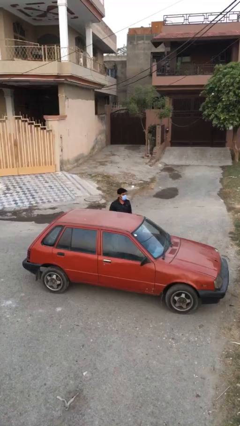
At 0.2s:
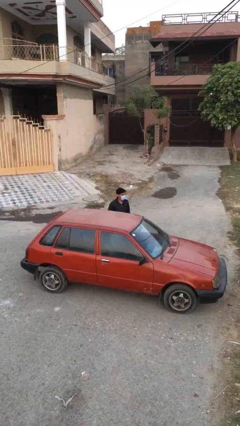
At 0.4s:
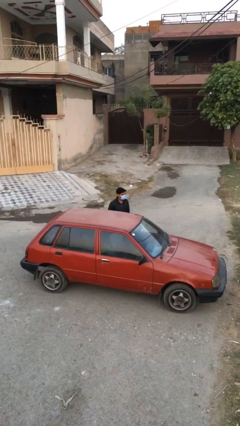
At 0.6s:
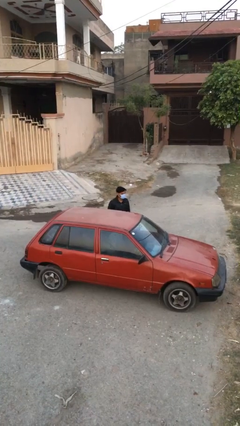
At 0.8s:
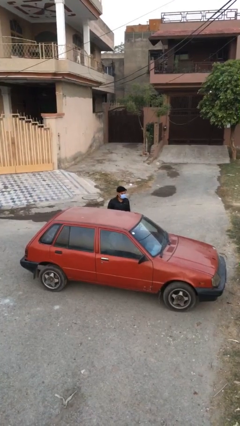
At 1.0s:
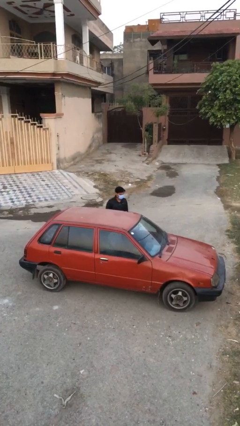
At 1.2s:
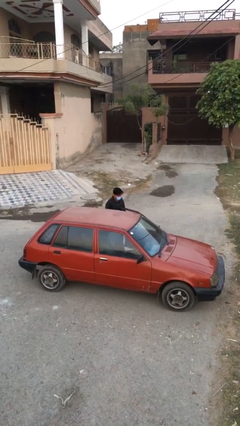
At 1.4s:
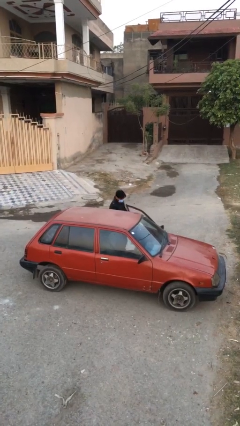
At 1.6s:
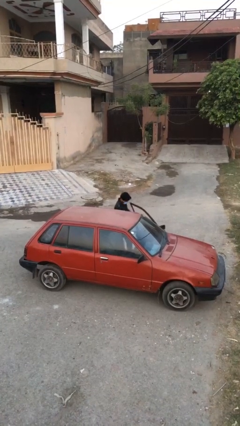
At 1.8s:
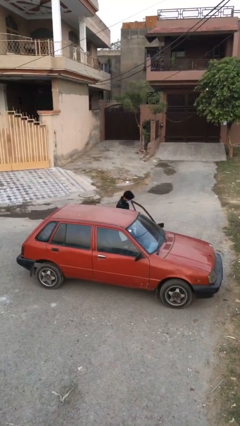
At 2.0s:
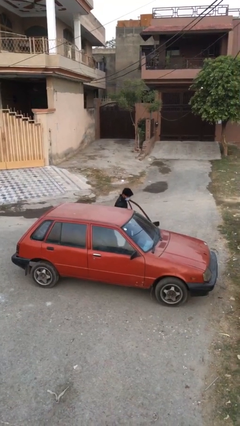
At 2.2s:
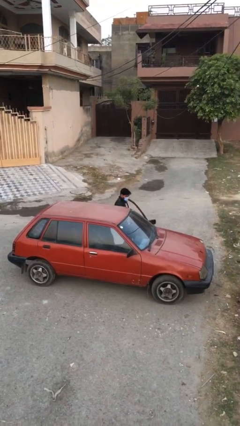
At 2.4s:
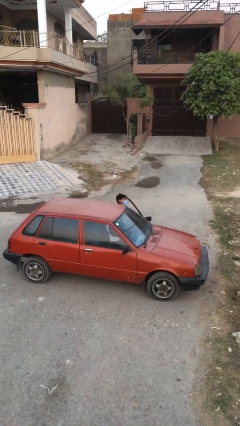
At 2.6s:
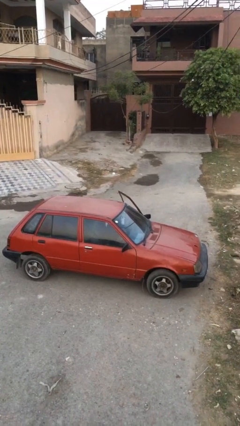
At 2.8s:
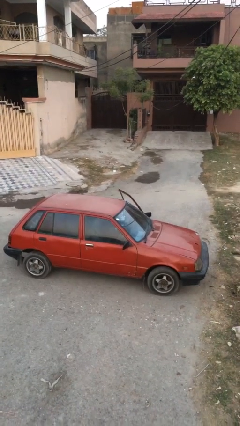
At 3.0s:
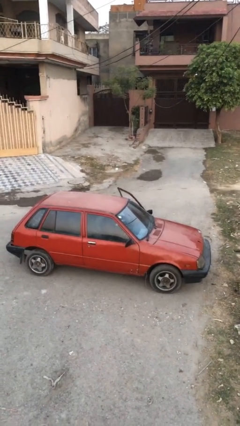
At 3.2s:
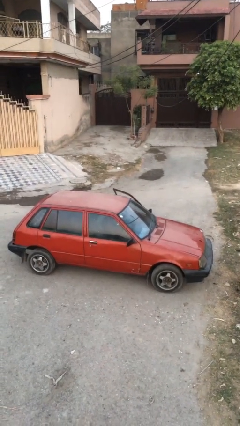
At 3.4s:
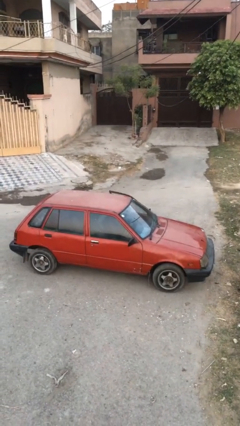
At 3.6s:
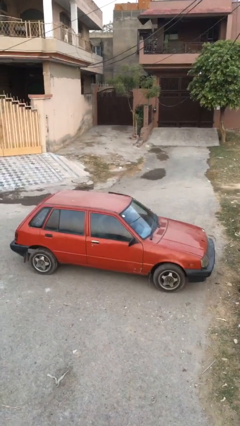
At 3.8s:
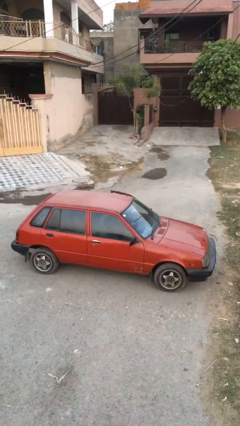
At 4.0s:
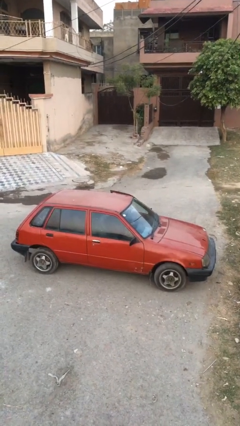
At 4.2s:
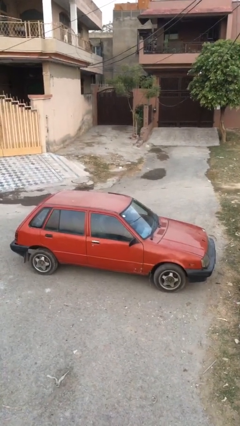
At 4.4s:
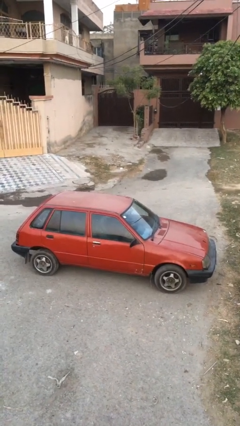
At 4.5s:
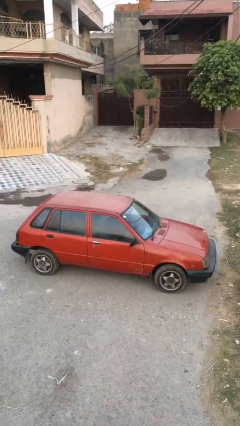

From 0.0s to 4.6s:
person enters car

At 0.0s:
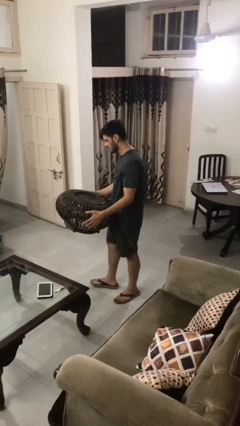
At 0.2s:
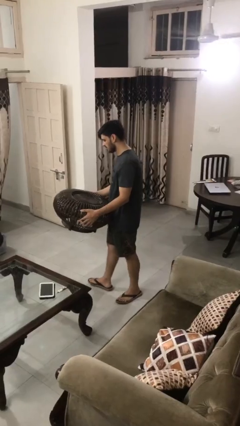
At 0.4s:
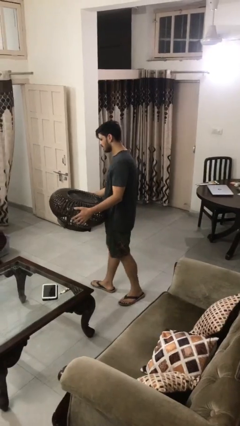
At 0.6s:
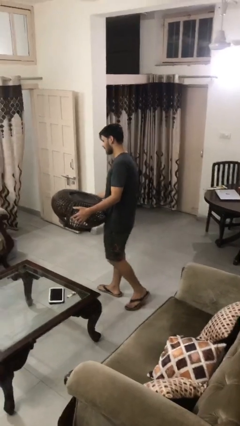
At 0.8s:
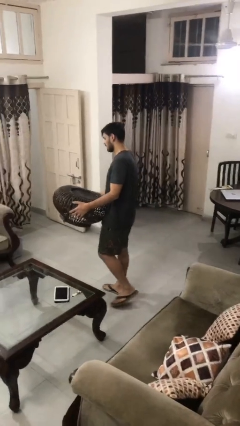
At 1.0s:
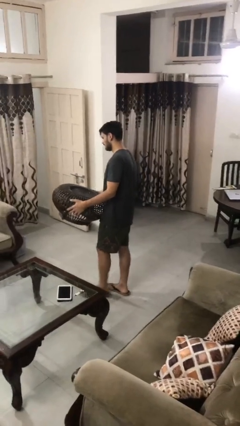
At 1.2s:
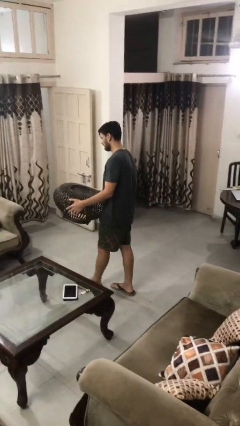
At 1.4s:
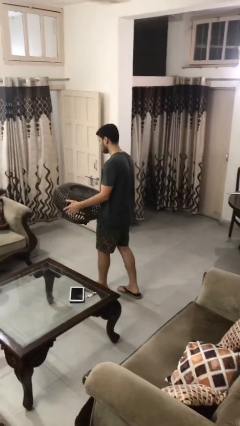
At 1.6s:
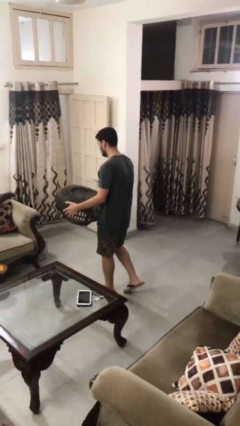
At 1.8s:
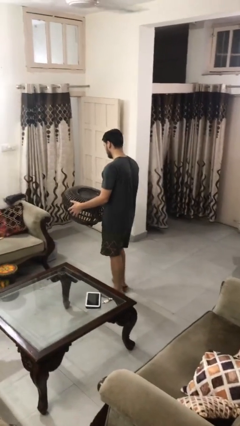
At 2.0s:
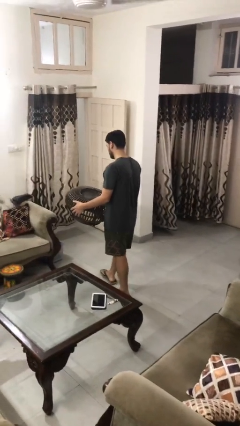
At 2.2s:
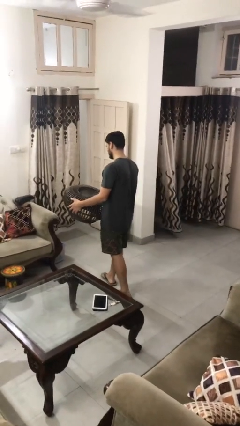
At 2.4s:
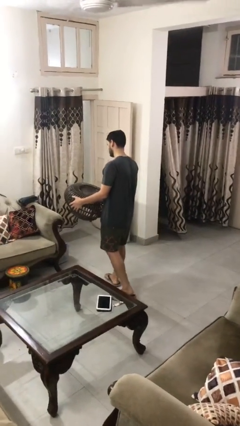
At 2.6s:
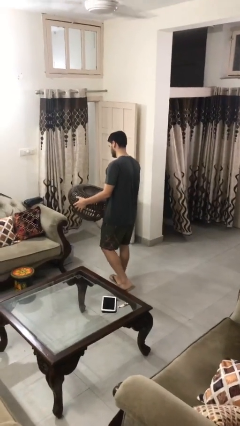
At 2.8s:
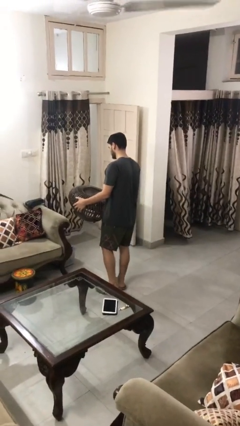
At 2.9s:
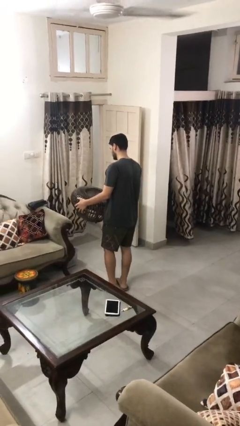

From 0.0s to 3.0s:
person carries furniture

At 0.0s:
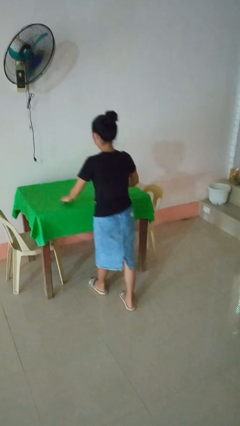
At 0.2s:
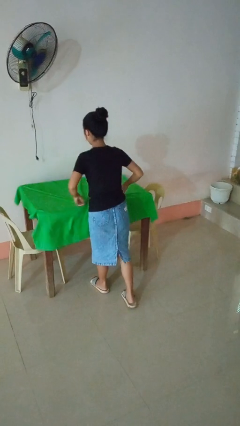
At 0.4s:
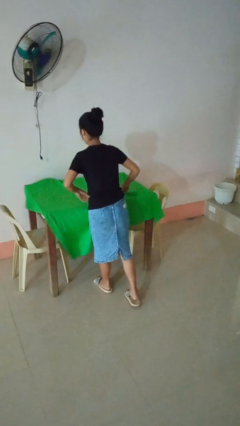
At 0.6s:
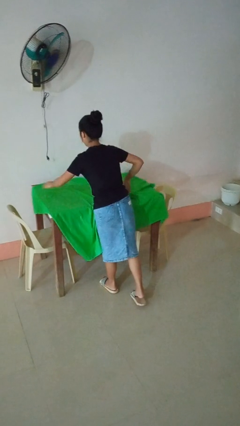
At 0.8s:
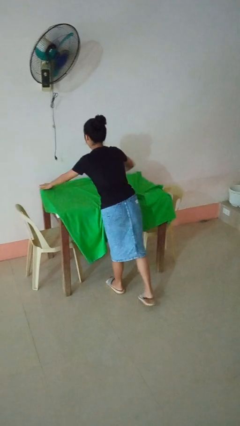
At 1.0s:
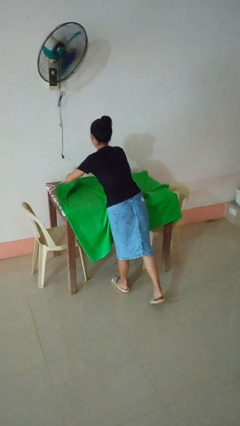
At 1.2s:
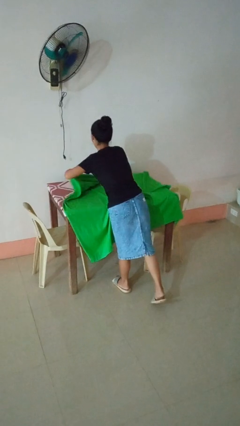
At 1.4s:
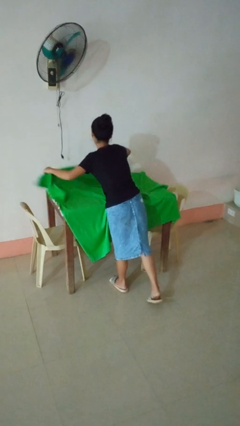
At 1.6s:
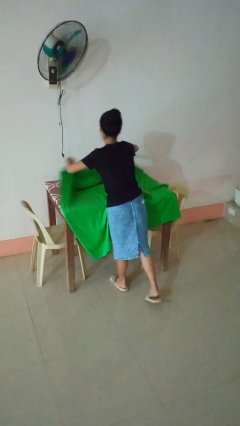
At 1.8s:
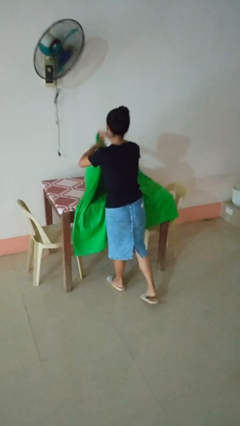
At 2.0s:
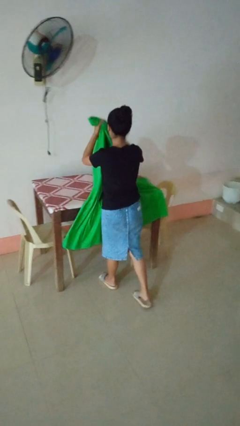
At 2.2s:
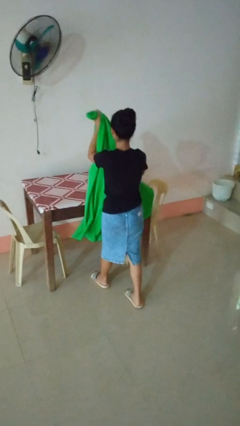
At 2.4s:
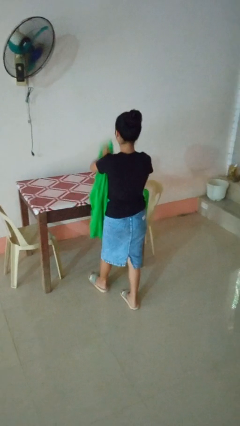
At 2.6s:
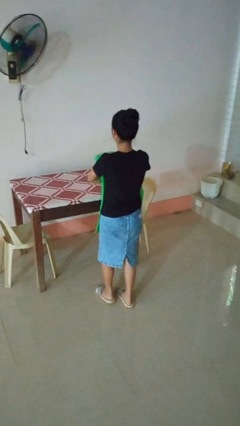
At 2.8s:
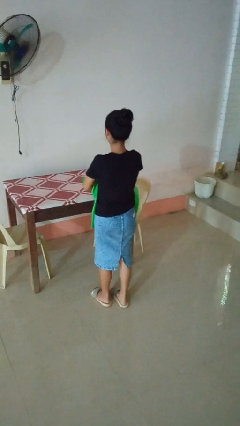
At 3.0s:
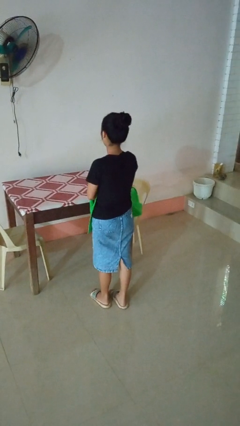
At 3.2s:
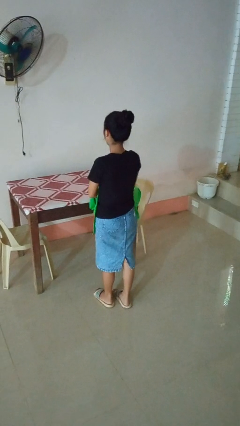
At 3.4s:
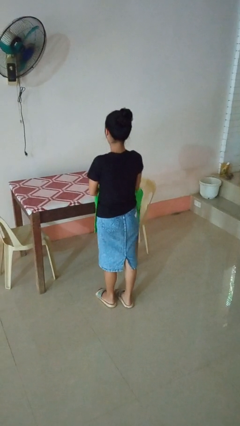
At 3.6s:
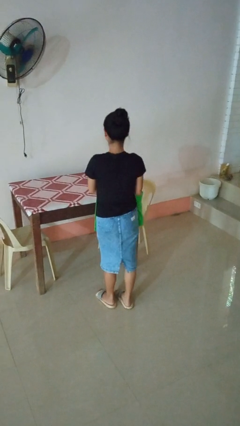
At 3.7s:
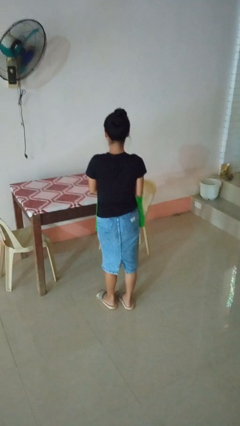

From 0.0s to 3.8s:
person folds tablecloth

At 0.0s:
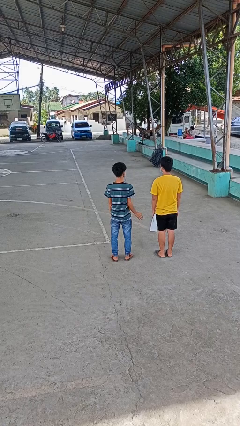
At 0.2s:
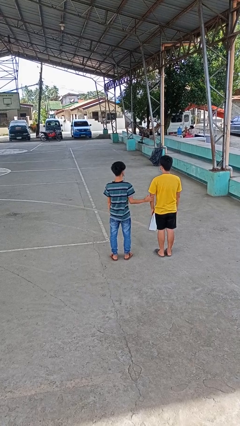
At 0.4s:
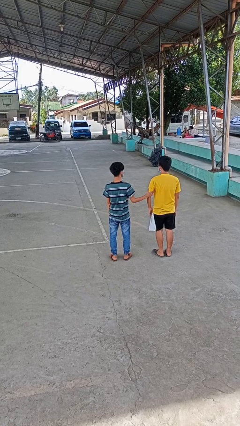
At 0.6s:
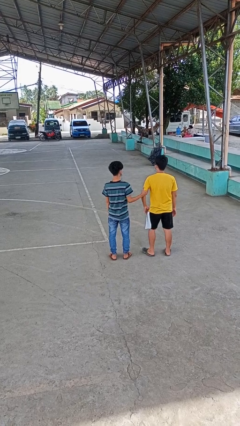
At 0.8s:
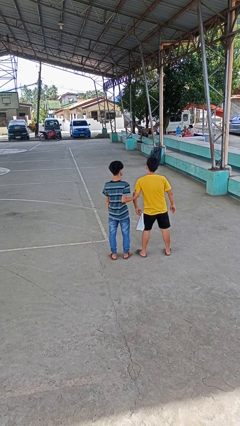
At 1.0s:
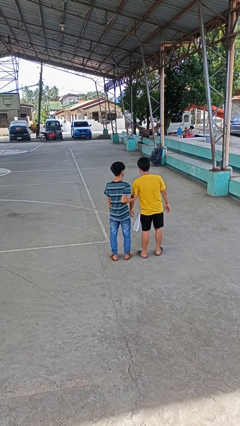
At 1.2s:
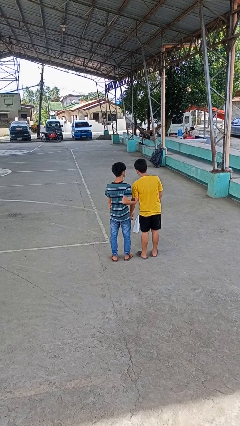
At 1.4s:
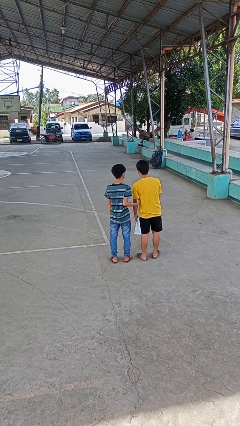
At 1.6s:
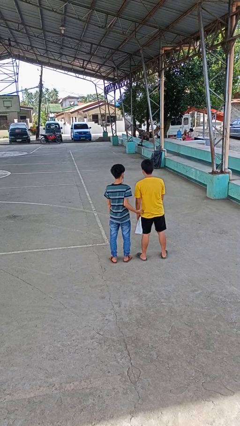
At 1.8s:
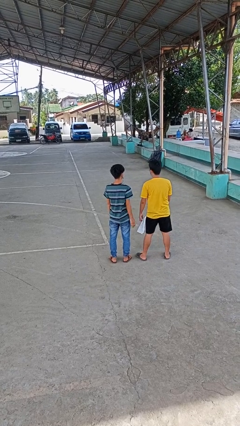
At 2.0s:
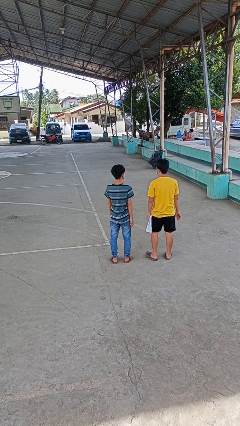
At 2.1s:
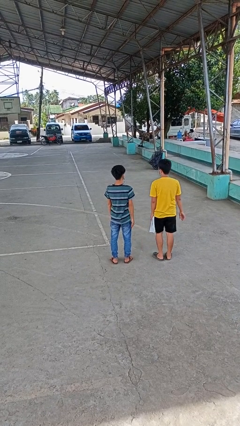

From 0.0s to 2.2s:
person grabs person by bicep

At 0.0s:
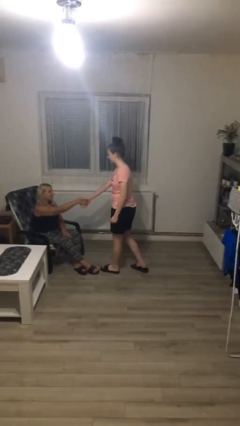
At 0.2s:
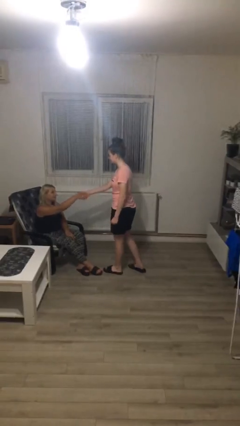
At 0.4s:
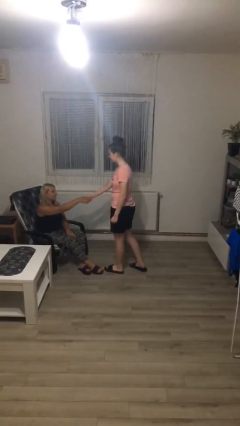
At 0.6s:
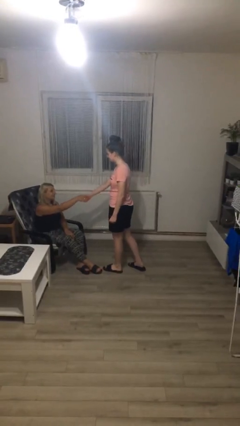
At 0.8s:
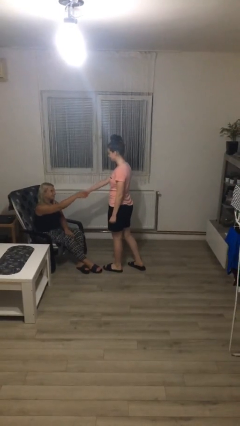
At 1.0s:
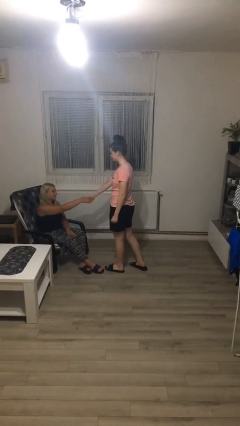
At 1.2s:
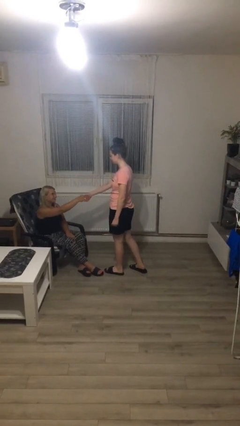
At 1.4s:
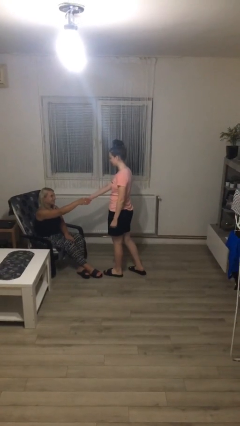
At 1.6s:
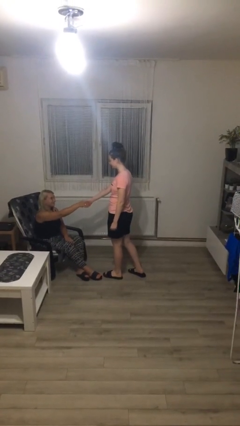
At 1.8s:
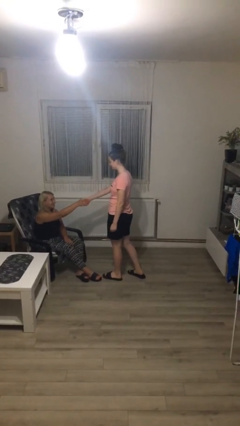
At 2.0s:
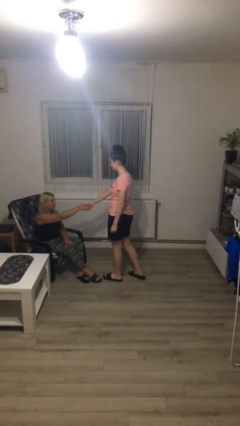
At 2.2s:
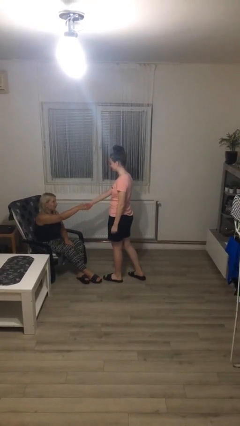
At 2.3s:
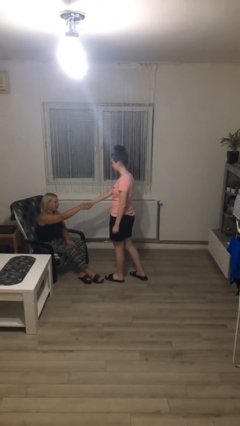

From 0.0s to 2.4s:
person shakes hand

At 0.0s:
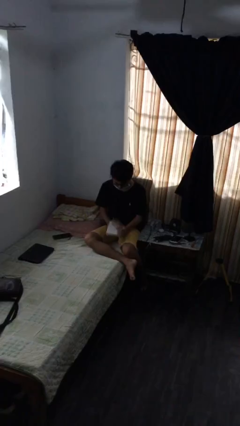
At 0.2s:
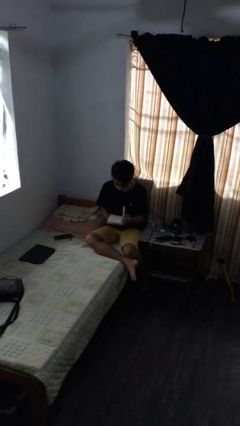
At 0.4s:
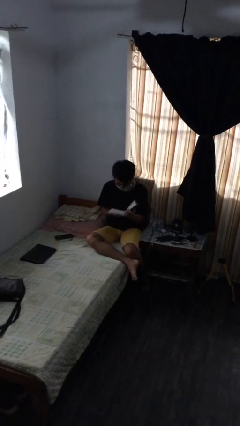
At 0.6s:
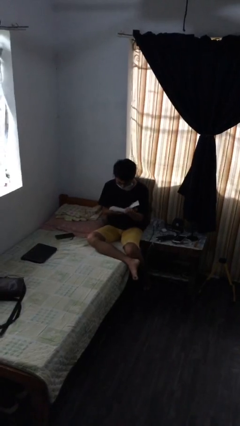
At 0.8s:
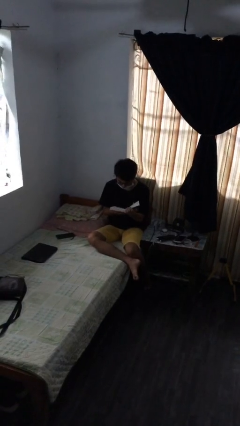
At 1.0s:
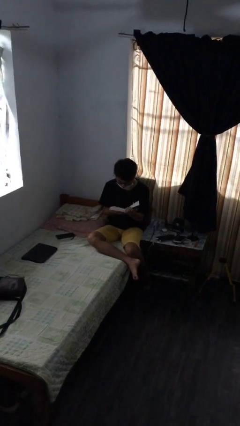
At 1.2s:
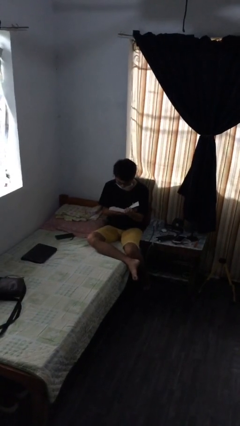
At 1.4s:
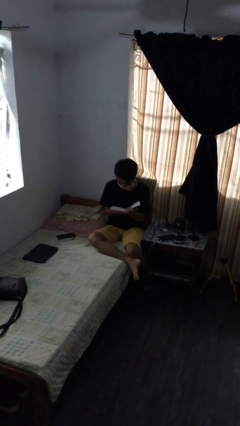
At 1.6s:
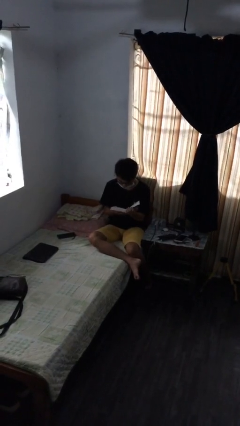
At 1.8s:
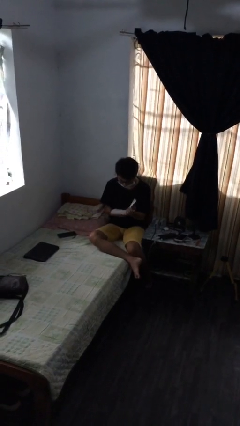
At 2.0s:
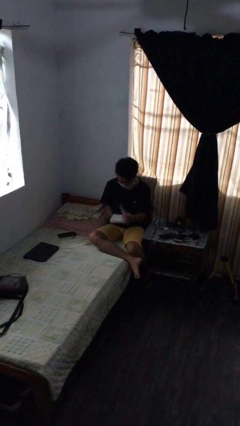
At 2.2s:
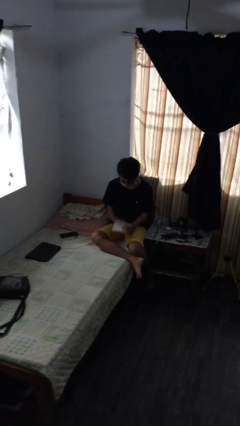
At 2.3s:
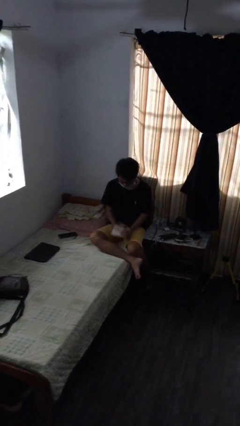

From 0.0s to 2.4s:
person reads document
